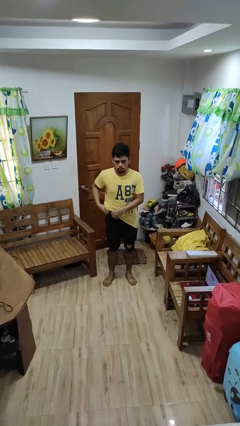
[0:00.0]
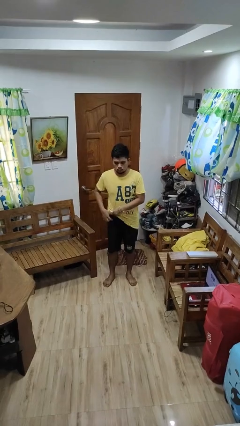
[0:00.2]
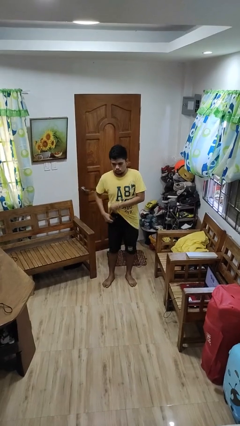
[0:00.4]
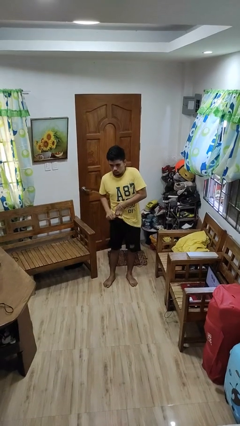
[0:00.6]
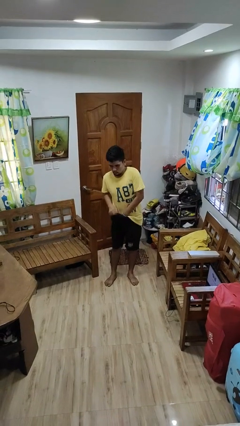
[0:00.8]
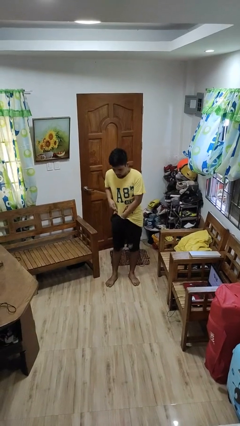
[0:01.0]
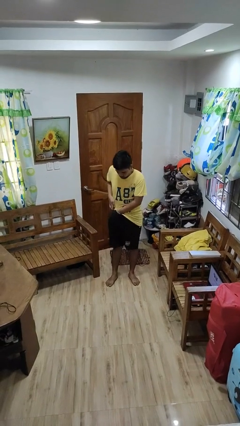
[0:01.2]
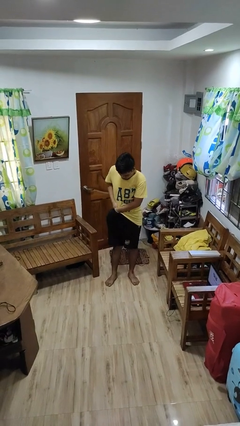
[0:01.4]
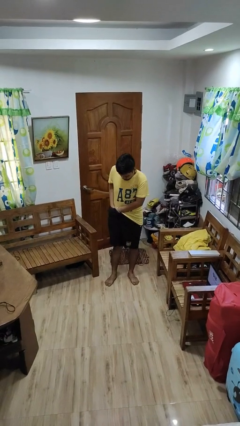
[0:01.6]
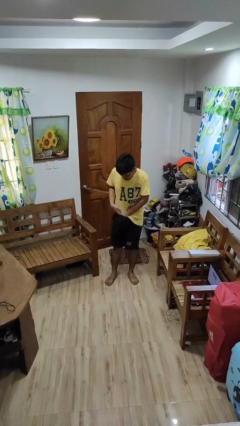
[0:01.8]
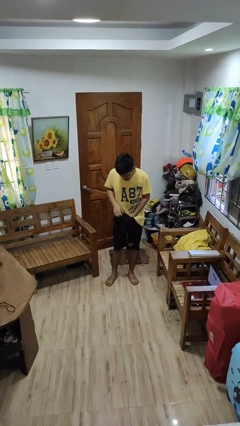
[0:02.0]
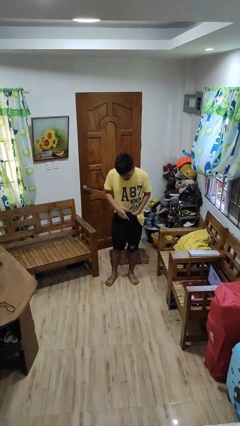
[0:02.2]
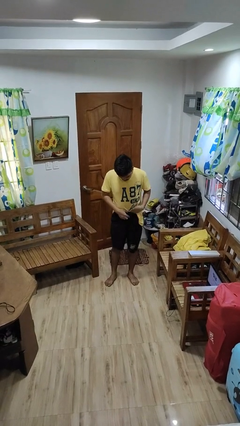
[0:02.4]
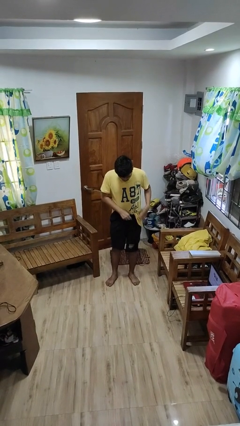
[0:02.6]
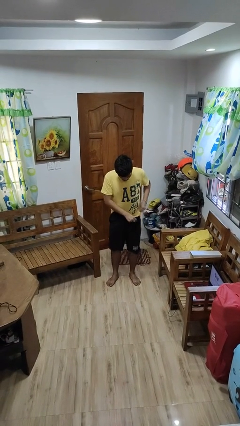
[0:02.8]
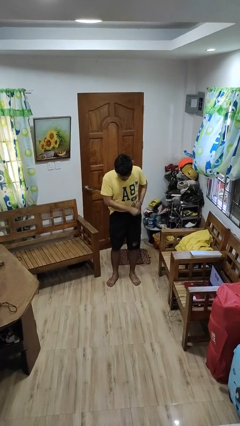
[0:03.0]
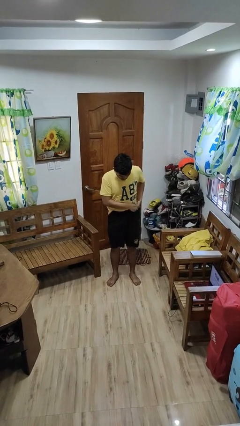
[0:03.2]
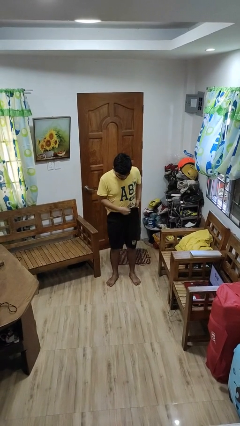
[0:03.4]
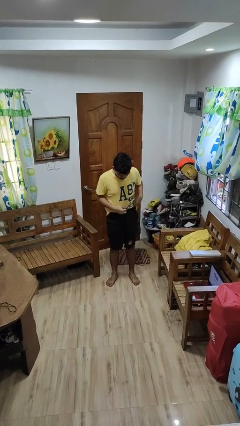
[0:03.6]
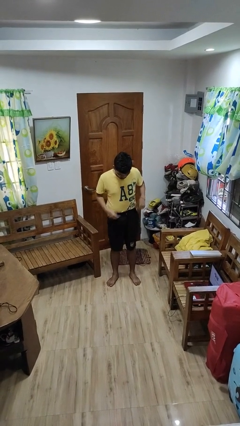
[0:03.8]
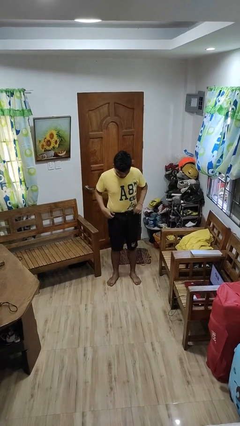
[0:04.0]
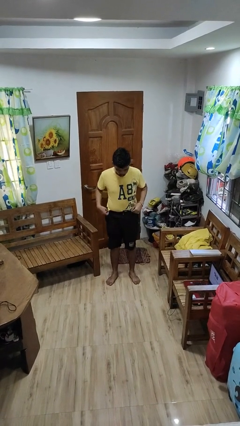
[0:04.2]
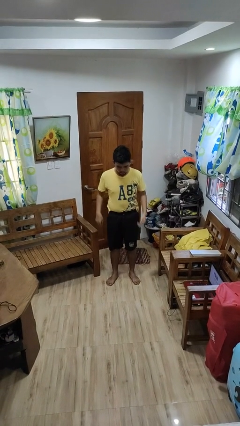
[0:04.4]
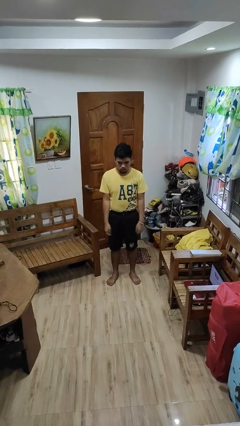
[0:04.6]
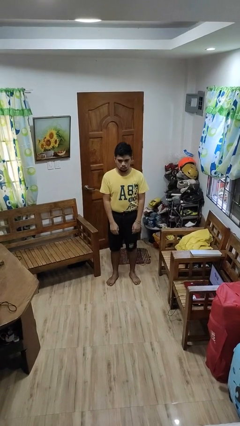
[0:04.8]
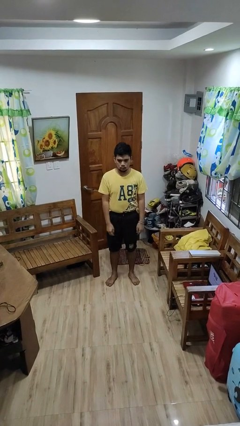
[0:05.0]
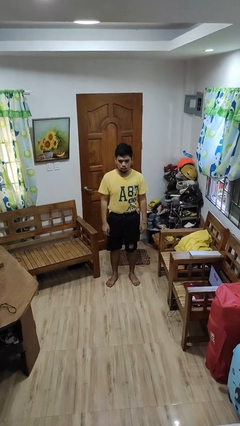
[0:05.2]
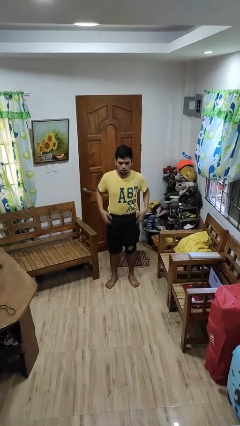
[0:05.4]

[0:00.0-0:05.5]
person tucks in shirt

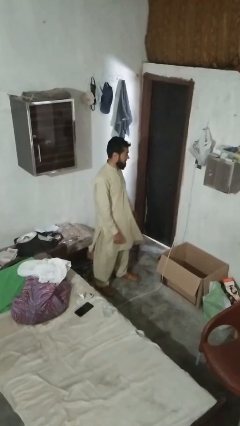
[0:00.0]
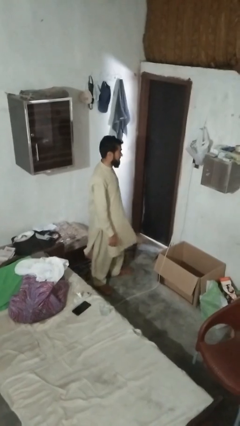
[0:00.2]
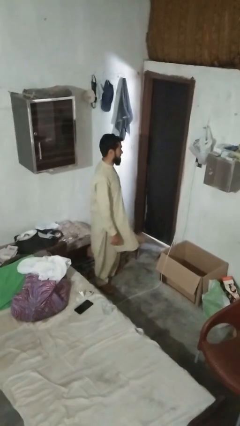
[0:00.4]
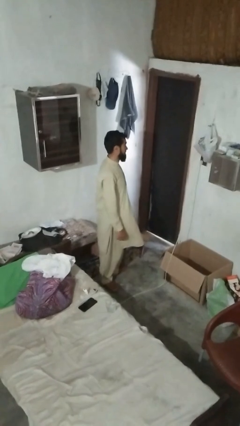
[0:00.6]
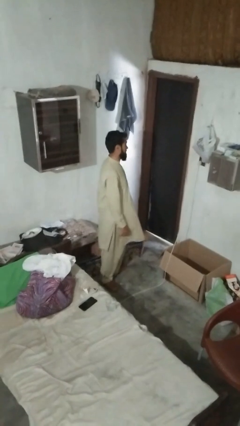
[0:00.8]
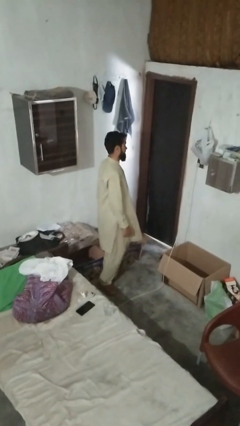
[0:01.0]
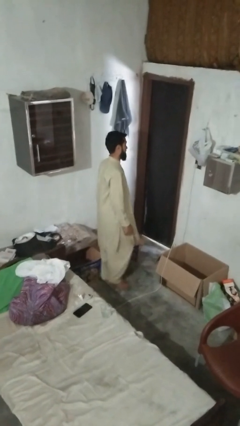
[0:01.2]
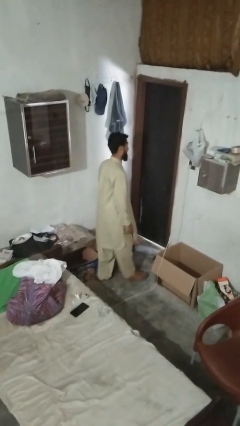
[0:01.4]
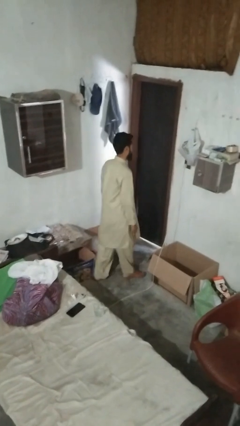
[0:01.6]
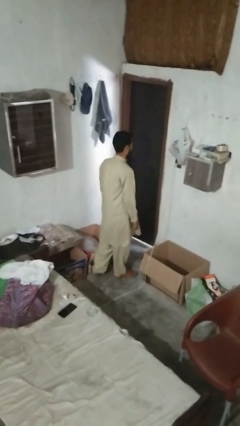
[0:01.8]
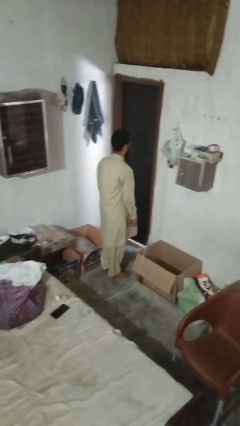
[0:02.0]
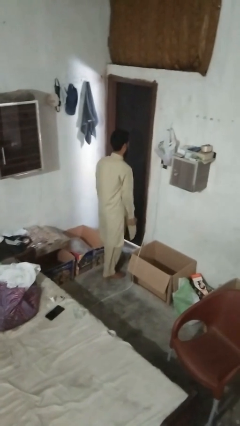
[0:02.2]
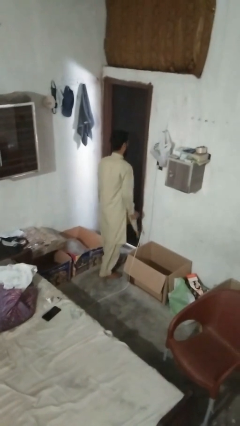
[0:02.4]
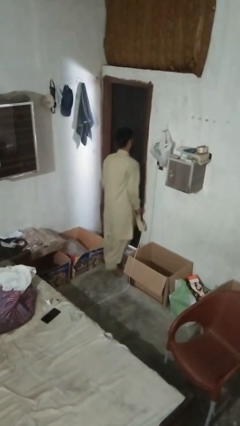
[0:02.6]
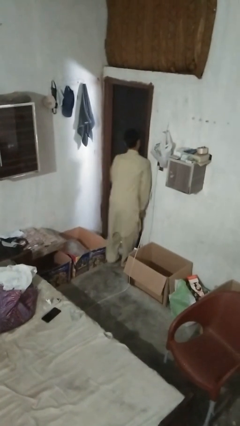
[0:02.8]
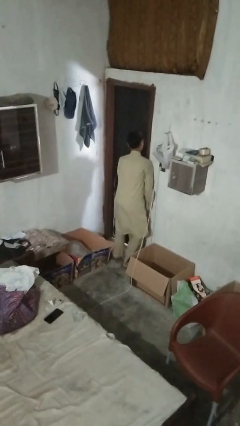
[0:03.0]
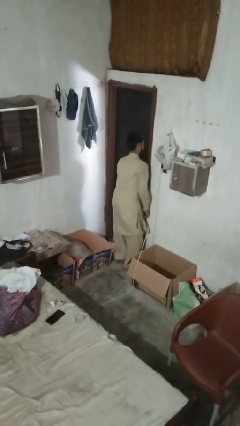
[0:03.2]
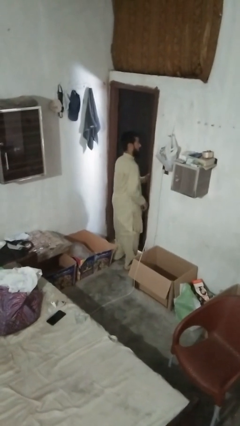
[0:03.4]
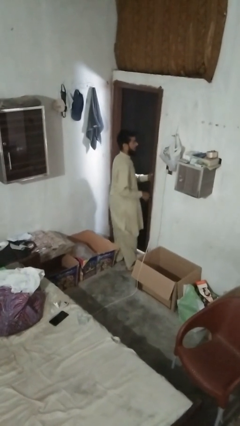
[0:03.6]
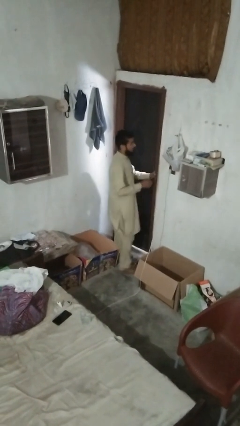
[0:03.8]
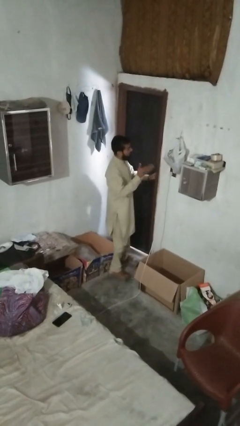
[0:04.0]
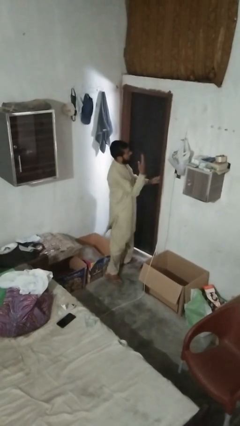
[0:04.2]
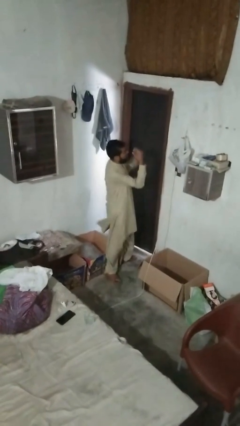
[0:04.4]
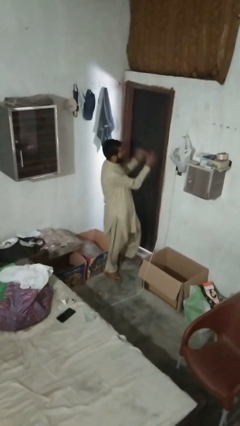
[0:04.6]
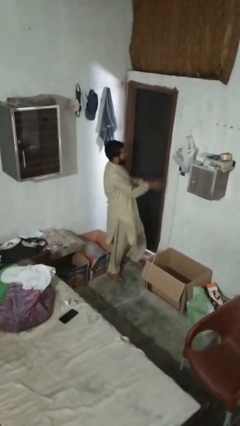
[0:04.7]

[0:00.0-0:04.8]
person bumps into wall

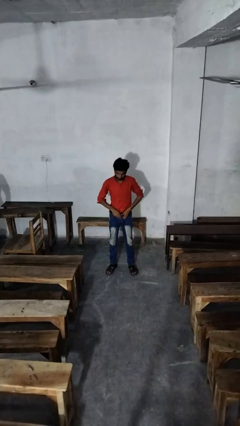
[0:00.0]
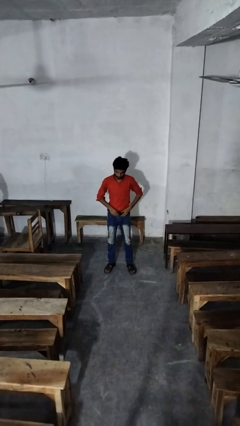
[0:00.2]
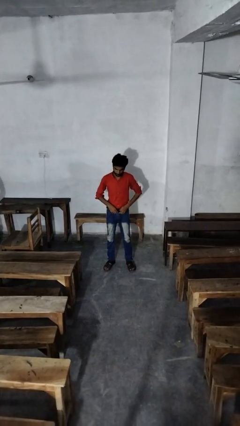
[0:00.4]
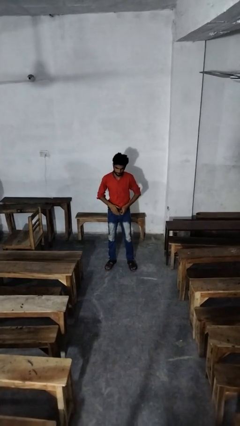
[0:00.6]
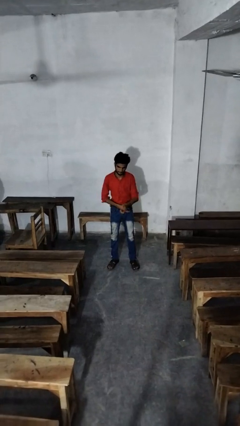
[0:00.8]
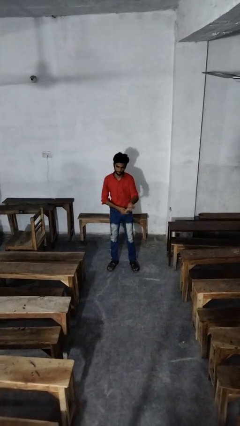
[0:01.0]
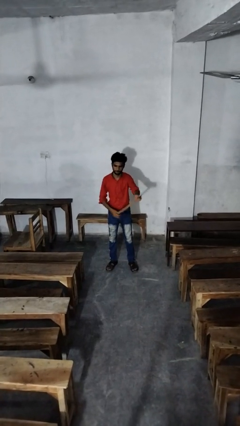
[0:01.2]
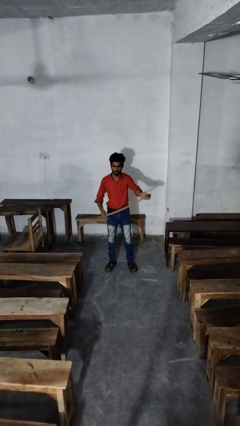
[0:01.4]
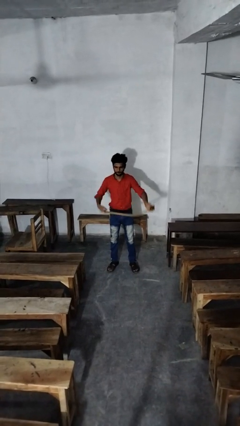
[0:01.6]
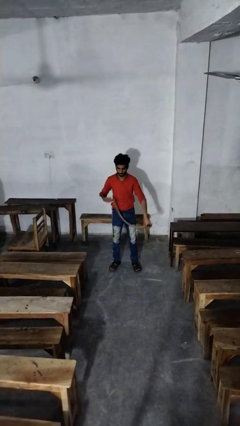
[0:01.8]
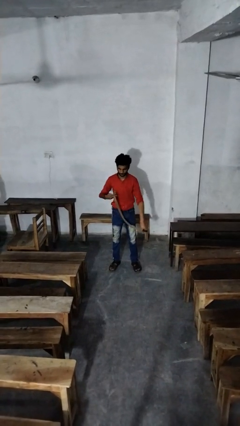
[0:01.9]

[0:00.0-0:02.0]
person takes off belt

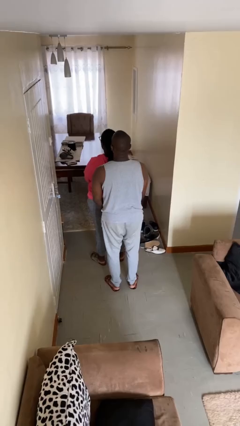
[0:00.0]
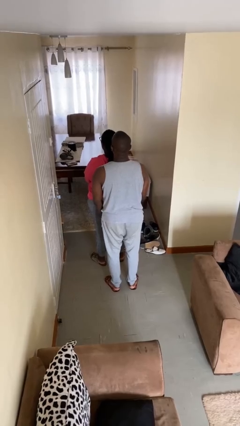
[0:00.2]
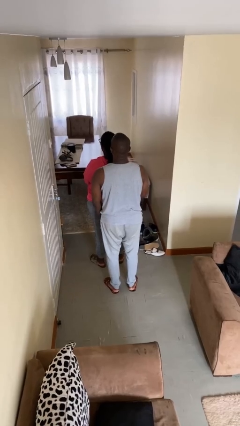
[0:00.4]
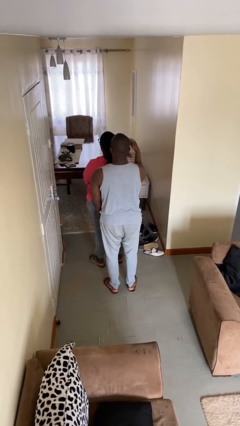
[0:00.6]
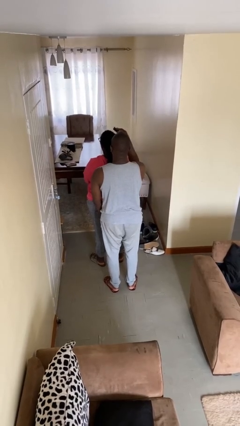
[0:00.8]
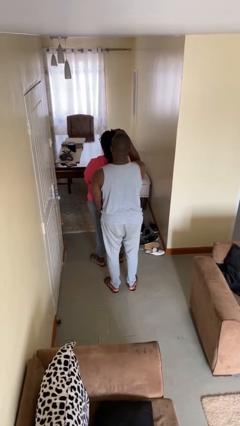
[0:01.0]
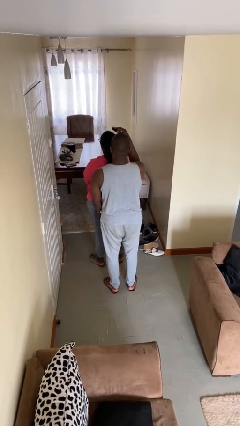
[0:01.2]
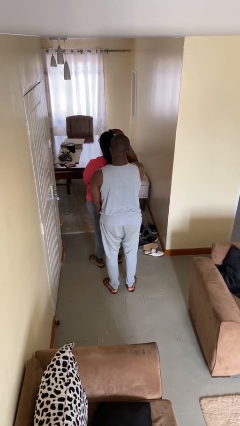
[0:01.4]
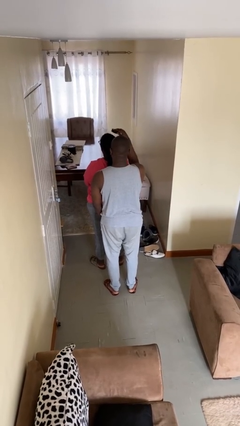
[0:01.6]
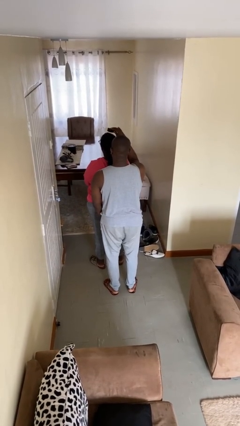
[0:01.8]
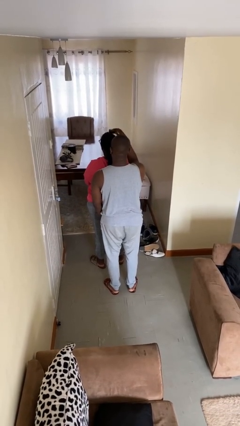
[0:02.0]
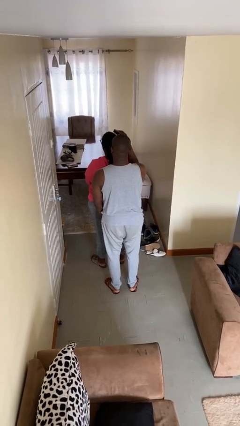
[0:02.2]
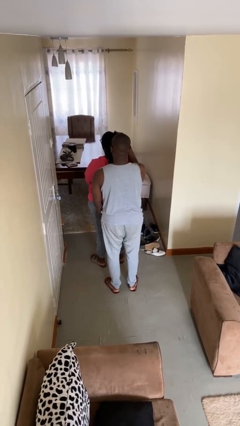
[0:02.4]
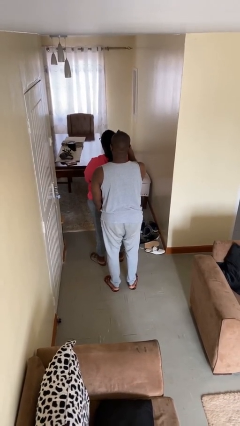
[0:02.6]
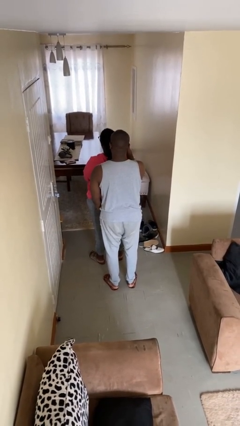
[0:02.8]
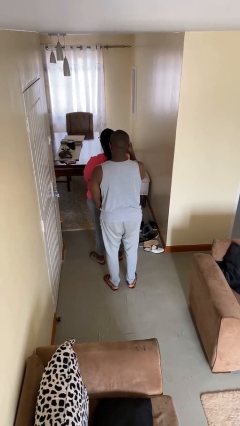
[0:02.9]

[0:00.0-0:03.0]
person brushes hair of person

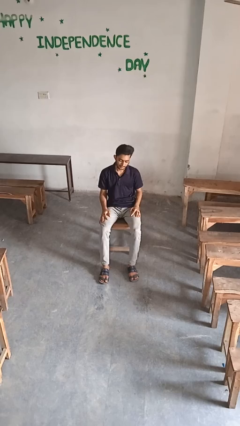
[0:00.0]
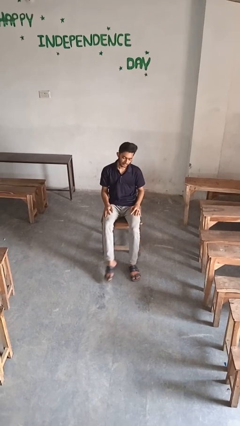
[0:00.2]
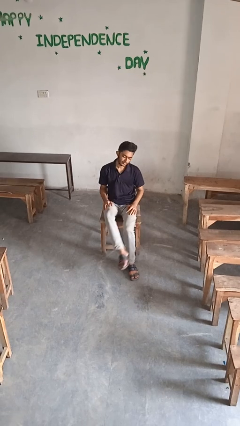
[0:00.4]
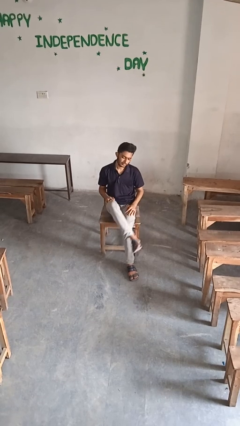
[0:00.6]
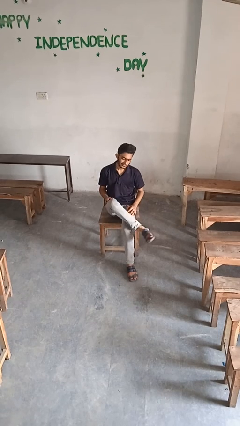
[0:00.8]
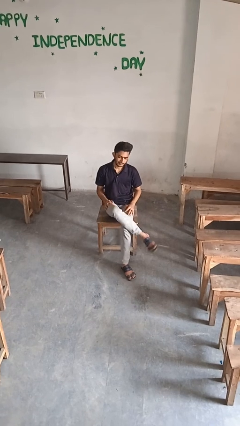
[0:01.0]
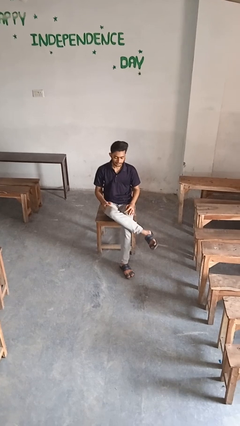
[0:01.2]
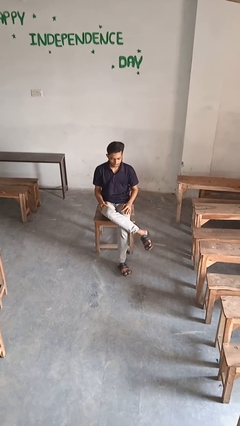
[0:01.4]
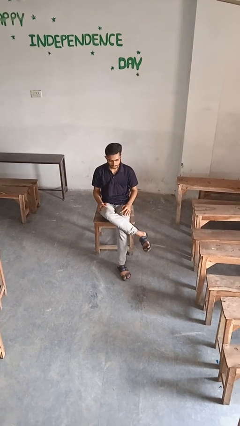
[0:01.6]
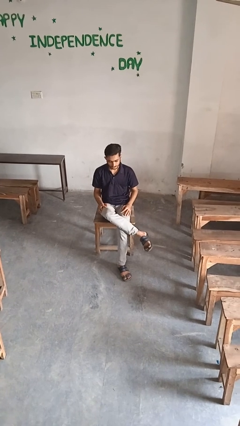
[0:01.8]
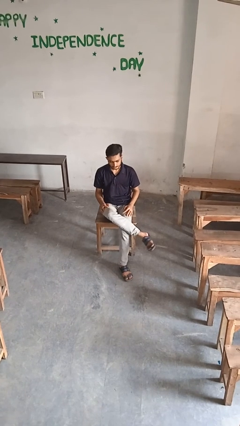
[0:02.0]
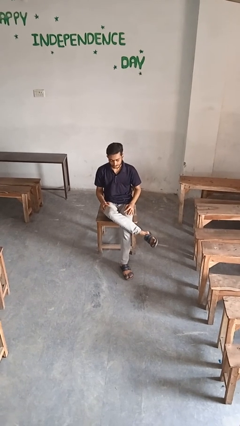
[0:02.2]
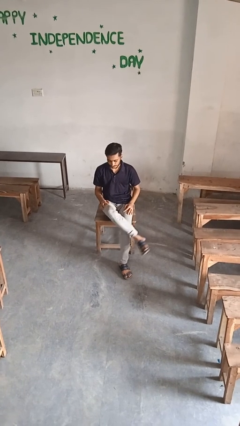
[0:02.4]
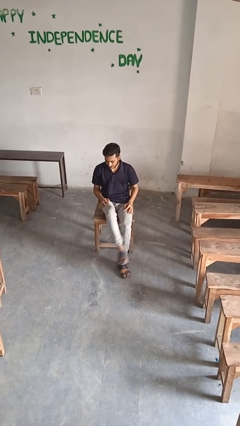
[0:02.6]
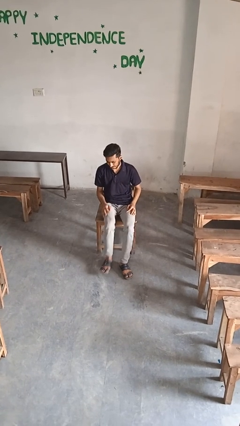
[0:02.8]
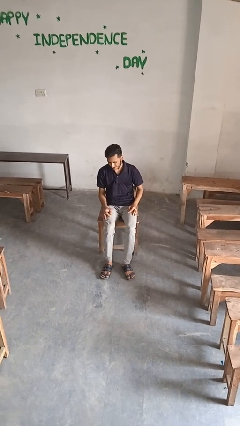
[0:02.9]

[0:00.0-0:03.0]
person crosses legs
